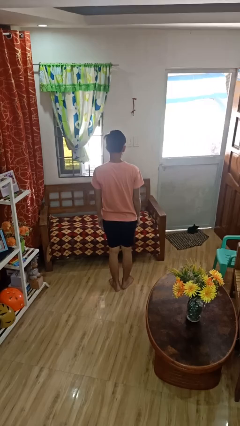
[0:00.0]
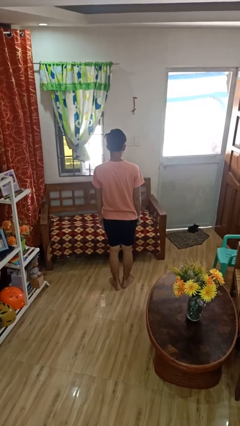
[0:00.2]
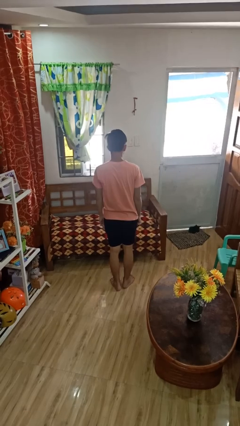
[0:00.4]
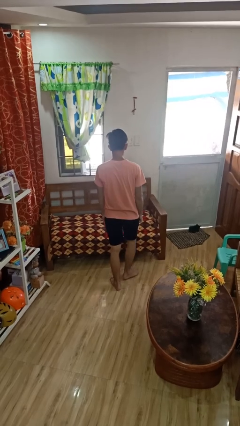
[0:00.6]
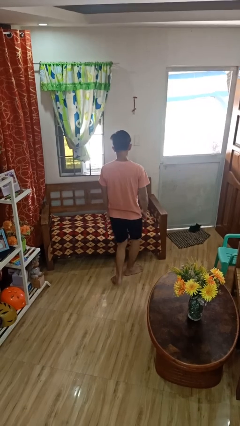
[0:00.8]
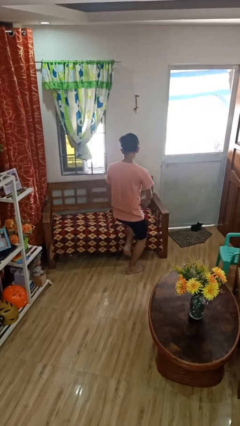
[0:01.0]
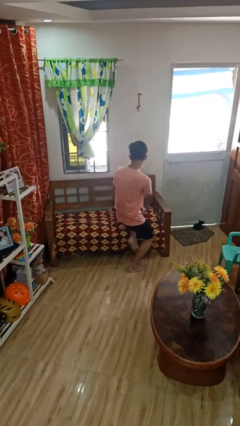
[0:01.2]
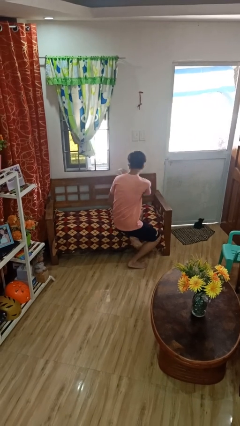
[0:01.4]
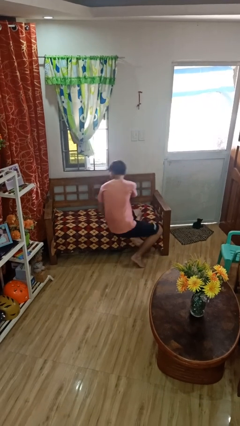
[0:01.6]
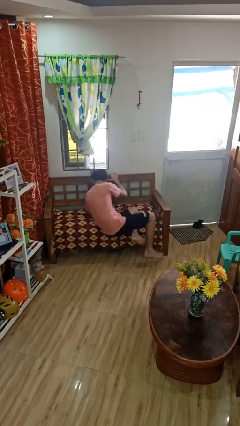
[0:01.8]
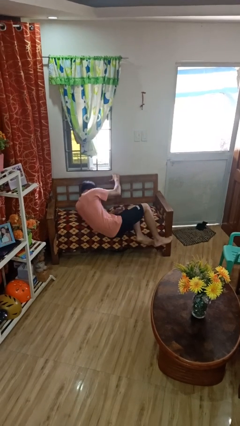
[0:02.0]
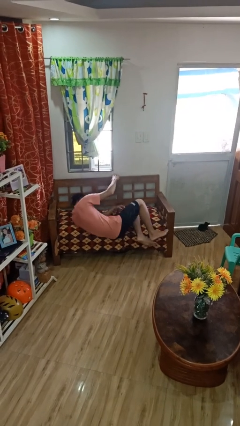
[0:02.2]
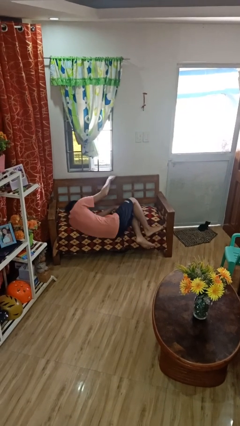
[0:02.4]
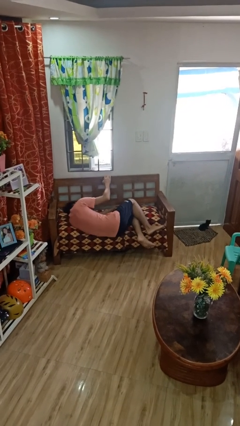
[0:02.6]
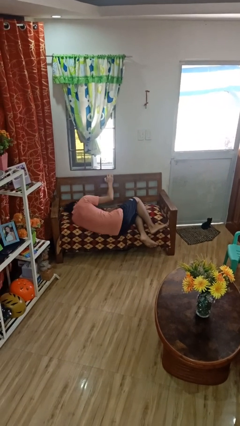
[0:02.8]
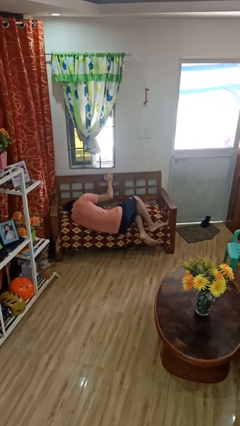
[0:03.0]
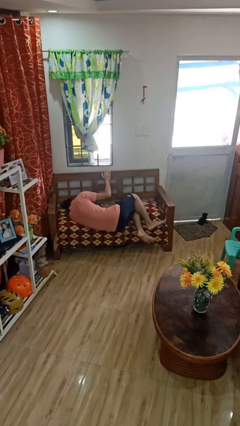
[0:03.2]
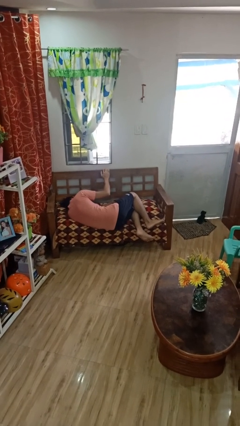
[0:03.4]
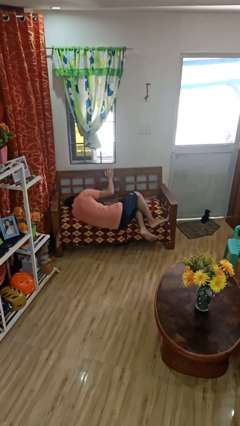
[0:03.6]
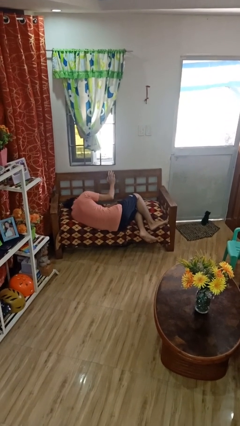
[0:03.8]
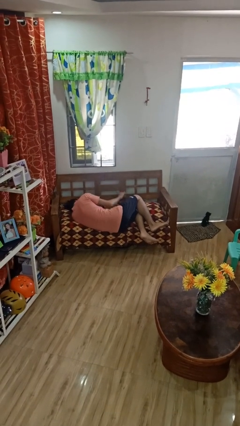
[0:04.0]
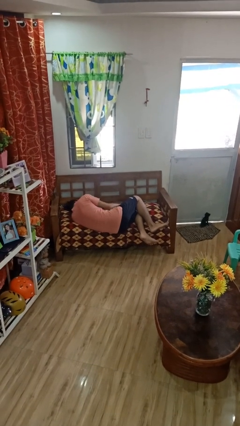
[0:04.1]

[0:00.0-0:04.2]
person lies down on couch

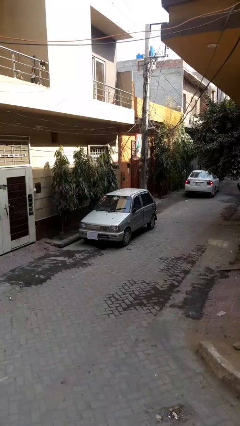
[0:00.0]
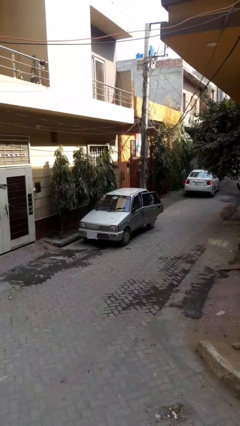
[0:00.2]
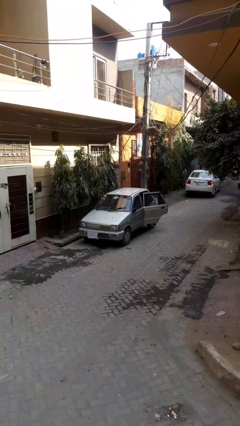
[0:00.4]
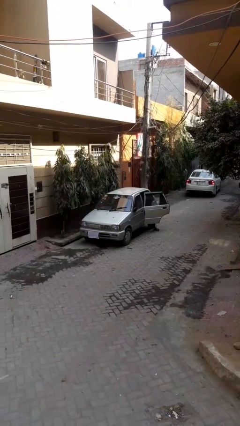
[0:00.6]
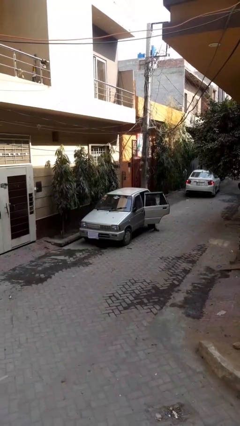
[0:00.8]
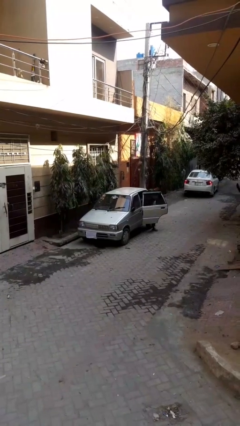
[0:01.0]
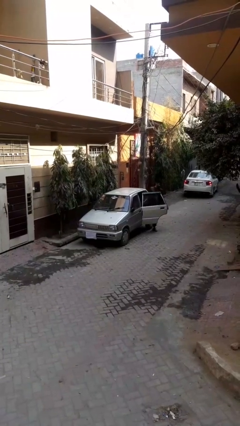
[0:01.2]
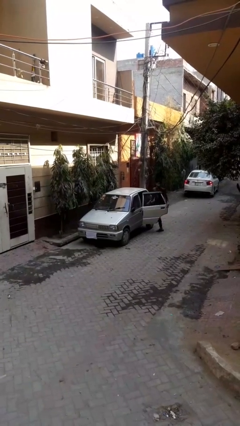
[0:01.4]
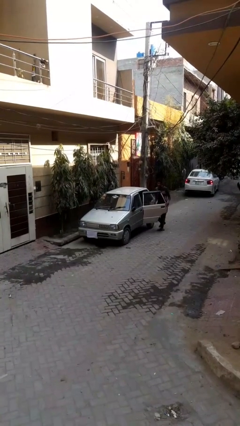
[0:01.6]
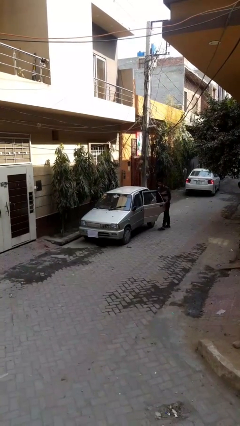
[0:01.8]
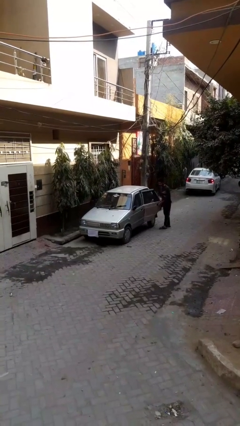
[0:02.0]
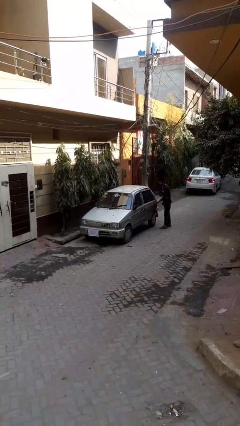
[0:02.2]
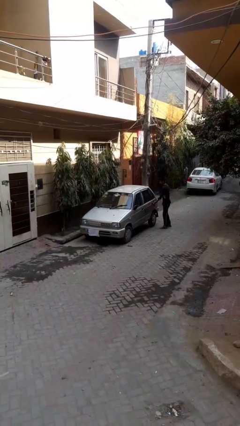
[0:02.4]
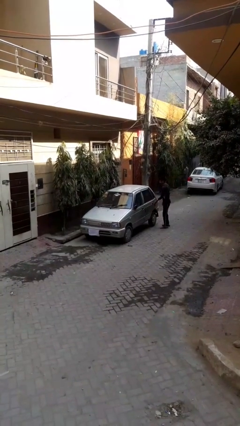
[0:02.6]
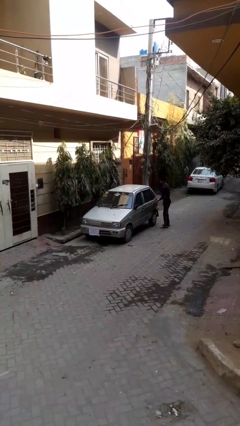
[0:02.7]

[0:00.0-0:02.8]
car drops off person

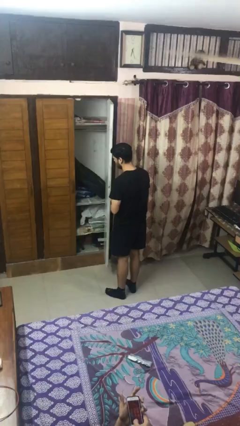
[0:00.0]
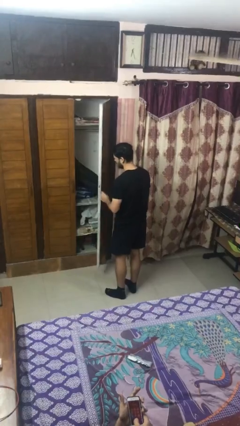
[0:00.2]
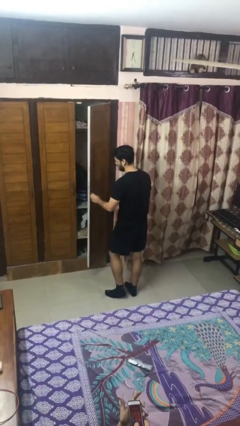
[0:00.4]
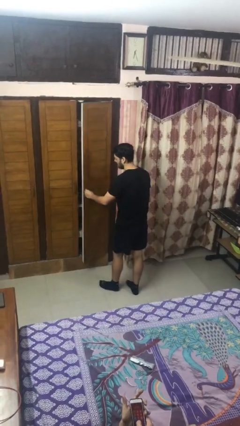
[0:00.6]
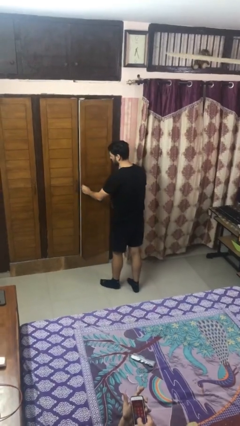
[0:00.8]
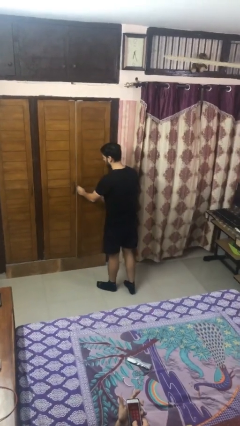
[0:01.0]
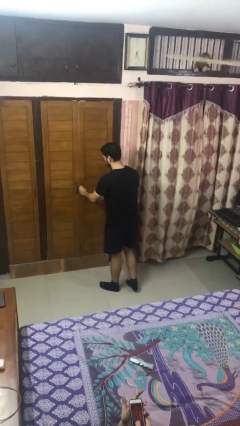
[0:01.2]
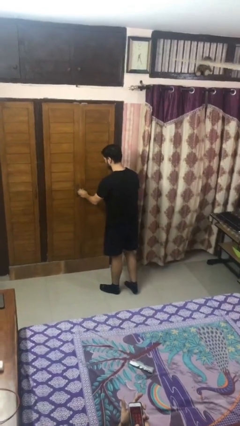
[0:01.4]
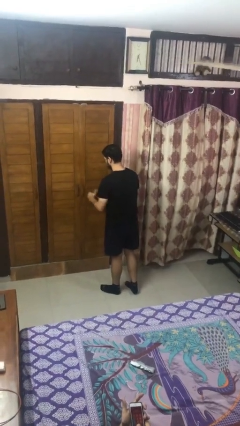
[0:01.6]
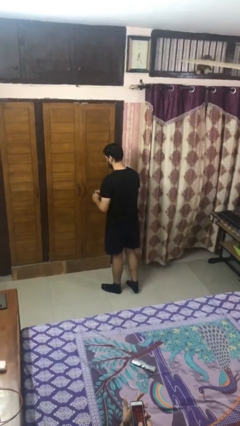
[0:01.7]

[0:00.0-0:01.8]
person closes facility door

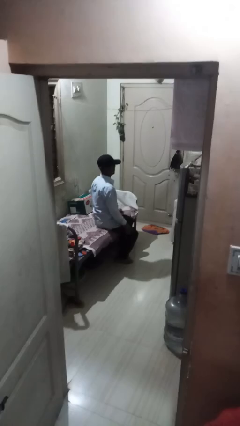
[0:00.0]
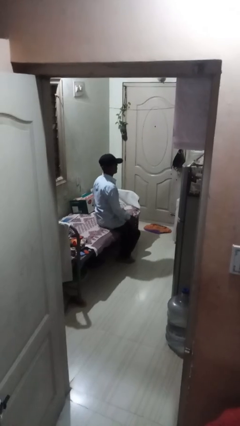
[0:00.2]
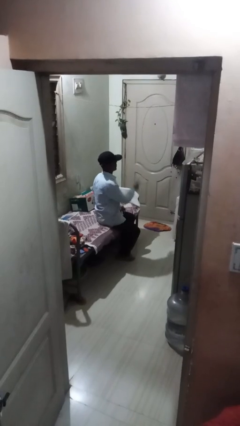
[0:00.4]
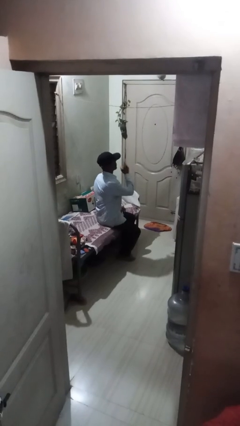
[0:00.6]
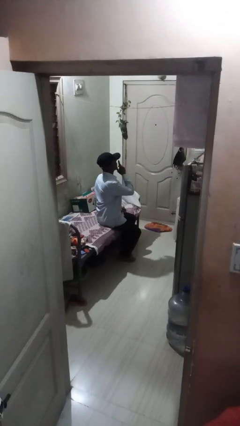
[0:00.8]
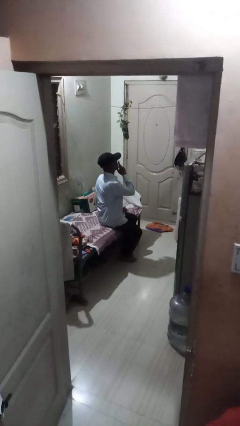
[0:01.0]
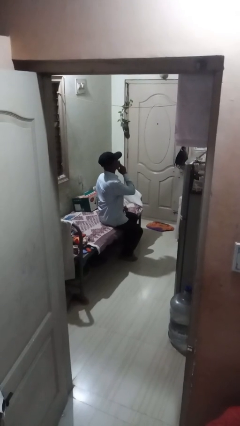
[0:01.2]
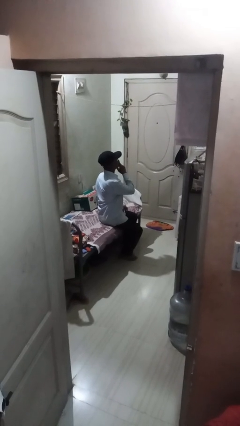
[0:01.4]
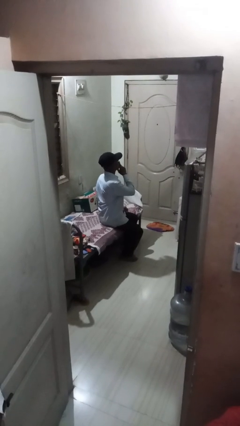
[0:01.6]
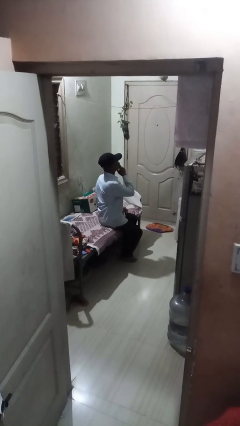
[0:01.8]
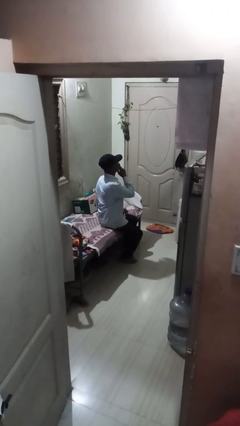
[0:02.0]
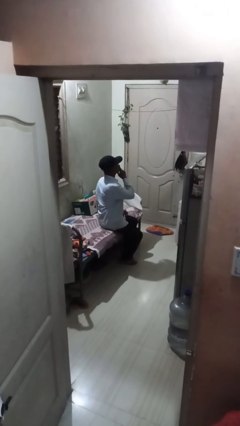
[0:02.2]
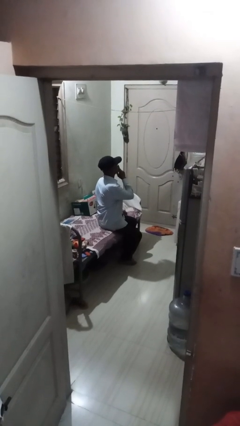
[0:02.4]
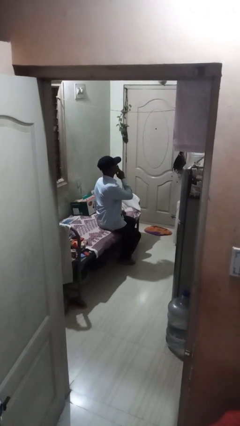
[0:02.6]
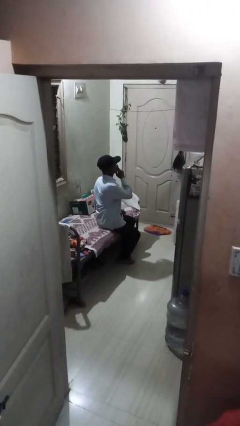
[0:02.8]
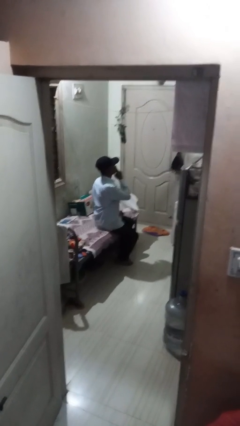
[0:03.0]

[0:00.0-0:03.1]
person gestures be quiet

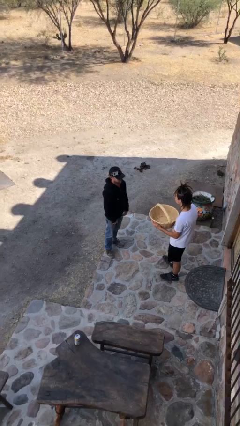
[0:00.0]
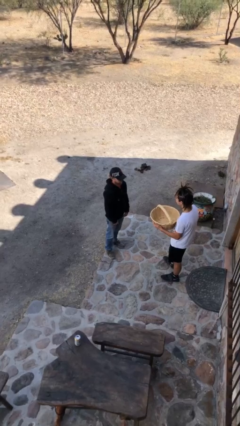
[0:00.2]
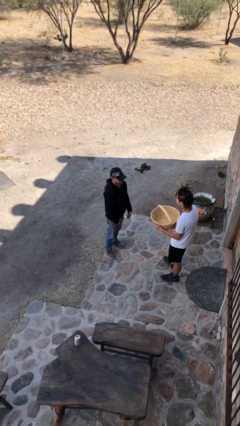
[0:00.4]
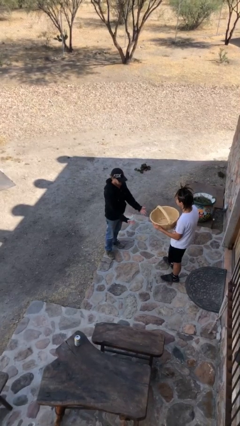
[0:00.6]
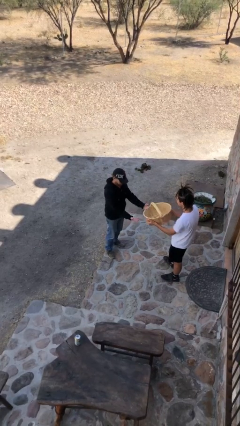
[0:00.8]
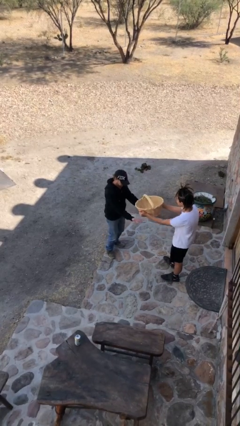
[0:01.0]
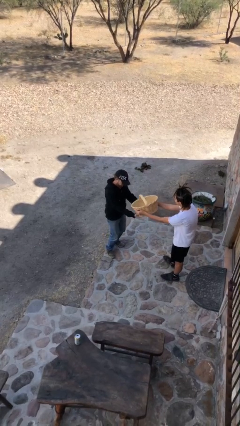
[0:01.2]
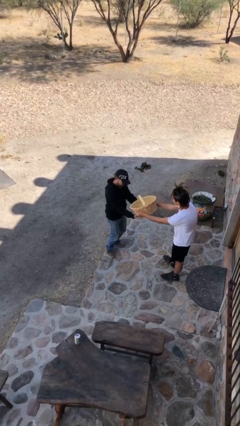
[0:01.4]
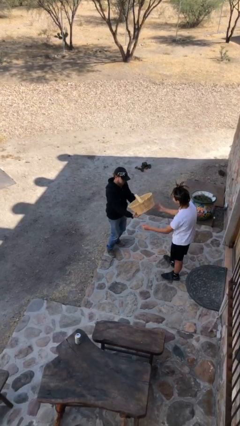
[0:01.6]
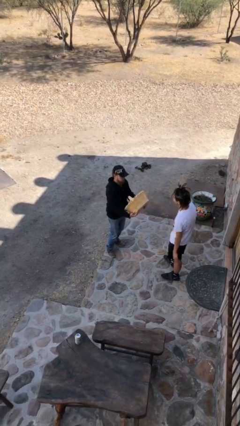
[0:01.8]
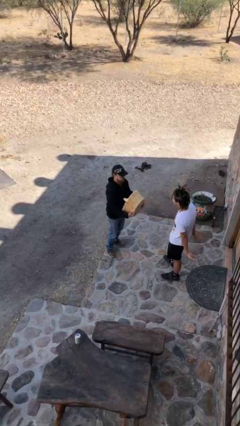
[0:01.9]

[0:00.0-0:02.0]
person transfers object to person

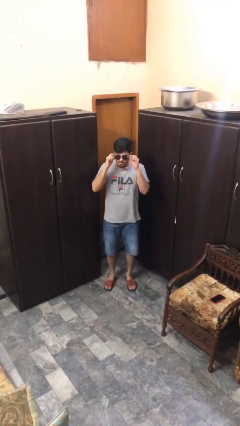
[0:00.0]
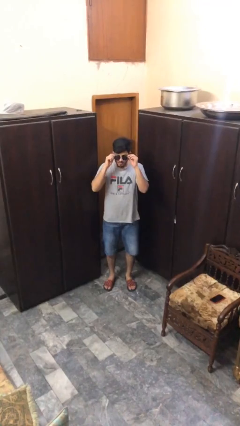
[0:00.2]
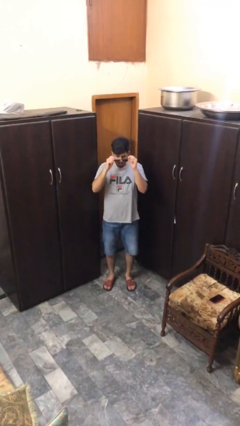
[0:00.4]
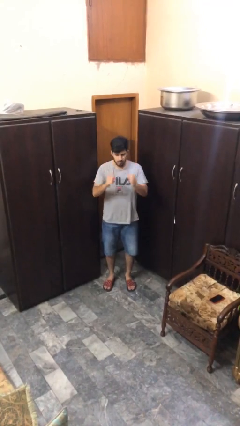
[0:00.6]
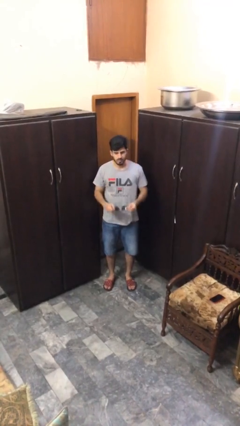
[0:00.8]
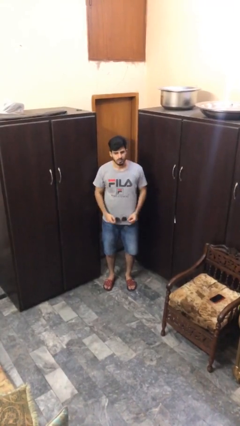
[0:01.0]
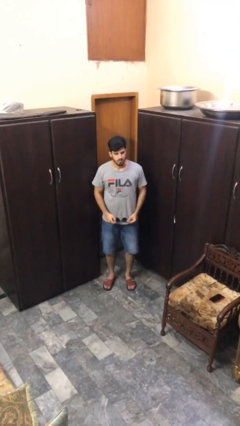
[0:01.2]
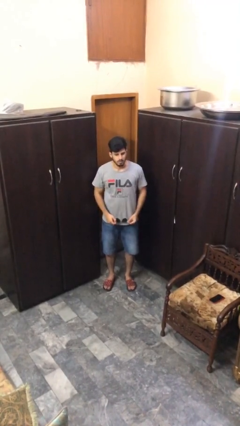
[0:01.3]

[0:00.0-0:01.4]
person takes off sunglasses

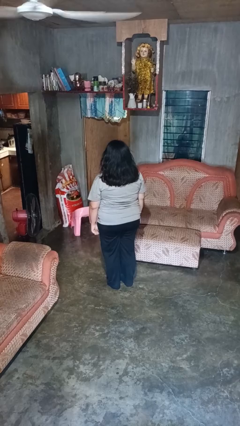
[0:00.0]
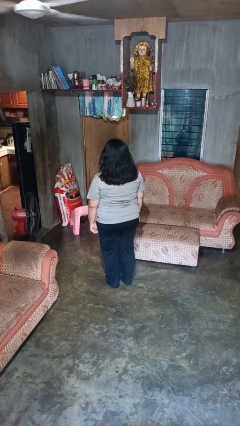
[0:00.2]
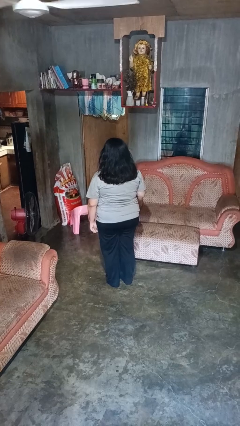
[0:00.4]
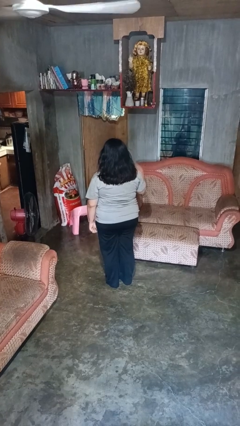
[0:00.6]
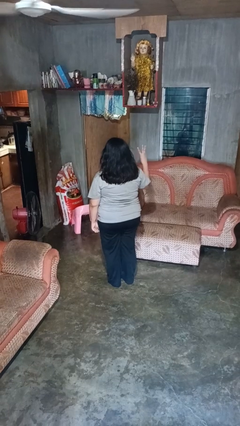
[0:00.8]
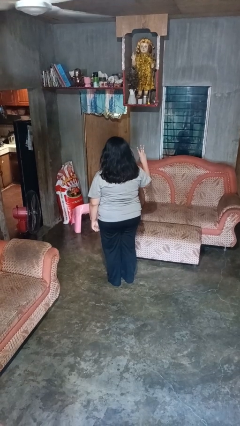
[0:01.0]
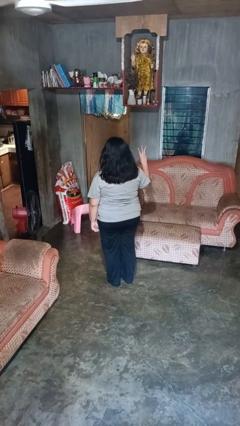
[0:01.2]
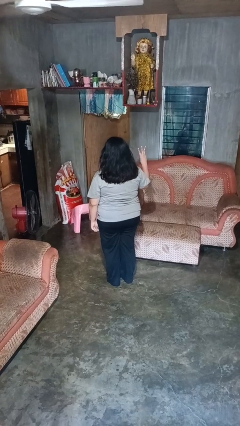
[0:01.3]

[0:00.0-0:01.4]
person gestures number three

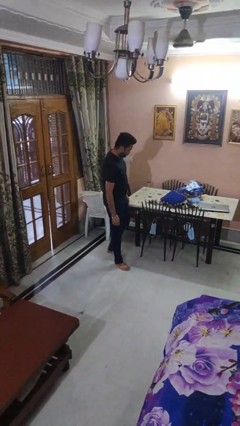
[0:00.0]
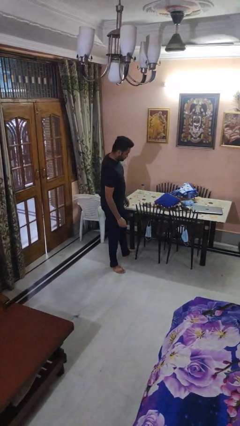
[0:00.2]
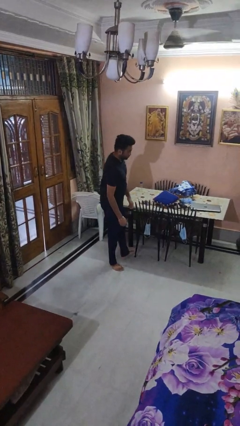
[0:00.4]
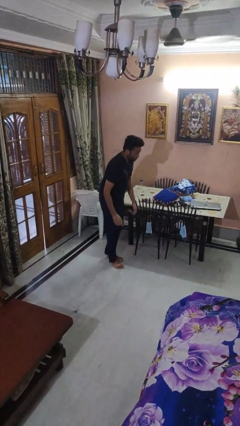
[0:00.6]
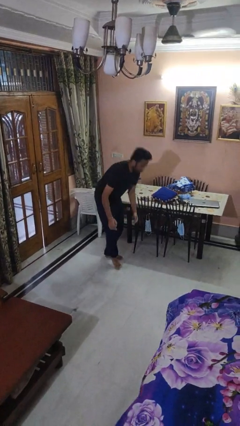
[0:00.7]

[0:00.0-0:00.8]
person trips on object on floor
